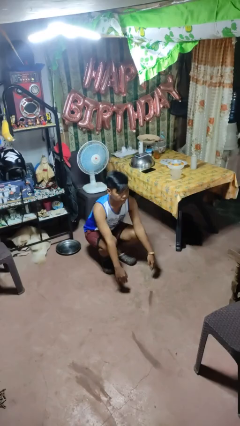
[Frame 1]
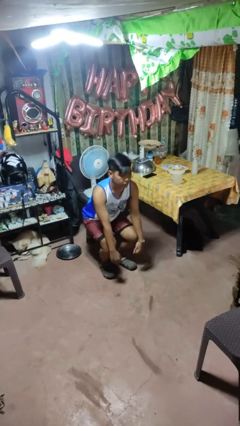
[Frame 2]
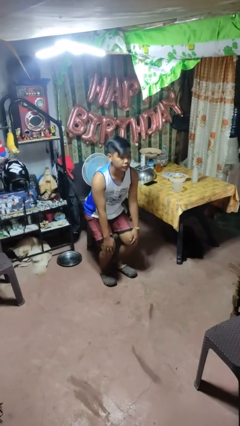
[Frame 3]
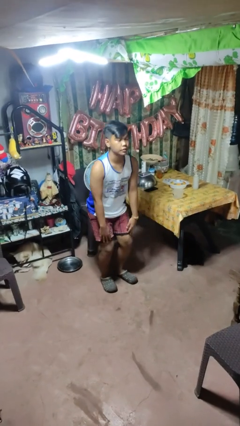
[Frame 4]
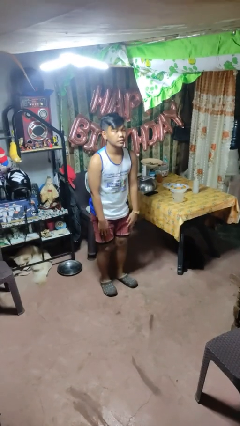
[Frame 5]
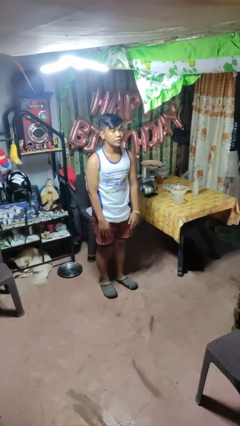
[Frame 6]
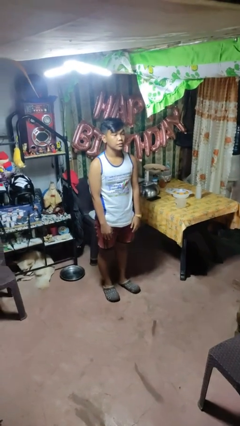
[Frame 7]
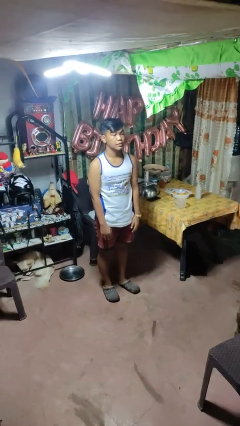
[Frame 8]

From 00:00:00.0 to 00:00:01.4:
person stands up

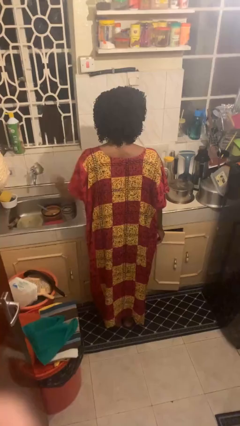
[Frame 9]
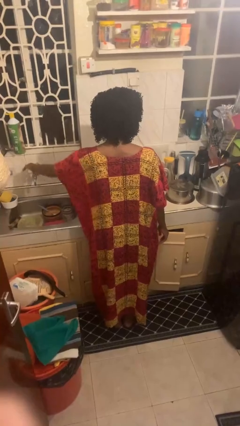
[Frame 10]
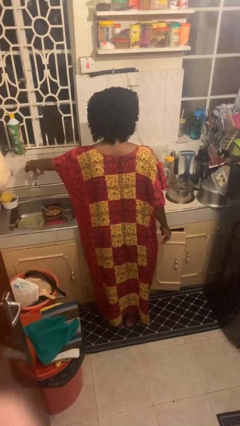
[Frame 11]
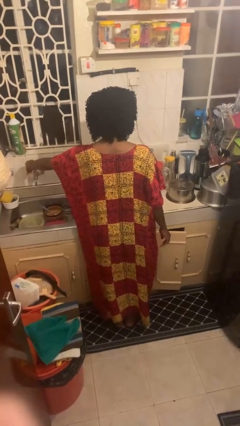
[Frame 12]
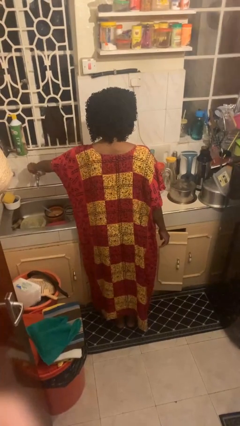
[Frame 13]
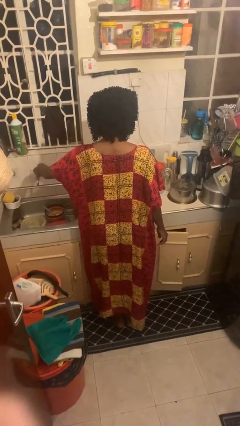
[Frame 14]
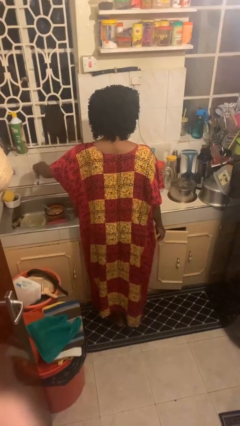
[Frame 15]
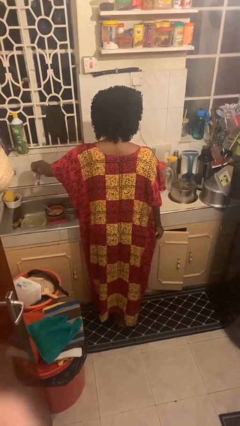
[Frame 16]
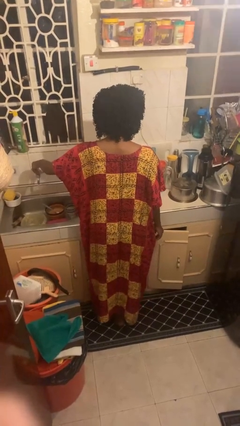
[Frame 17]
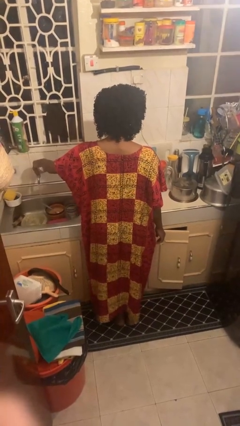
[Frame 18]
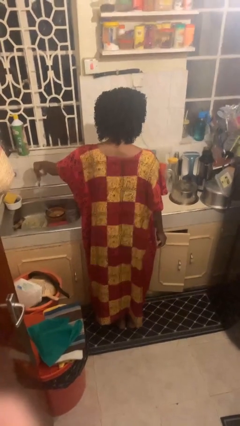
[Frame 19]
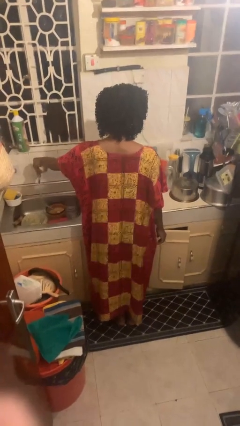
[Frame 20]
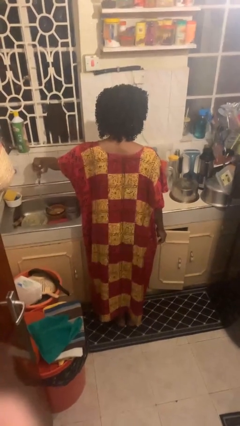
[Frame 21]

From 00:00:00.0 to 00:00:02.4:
person turns on faucet

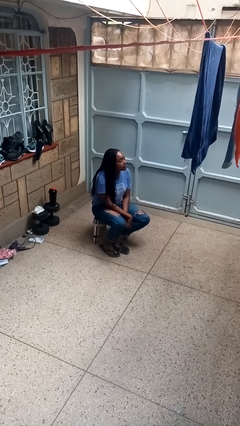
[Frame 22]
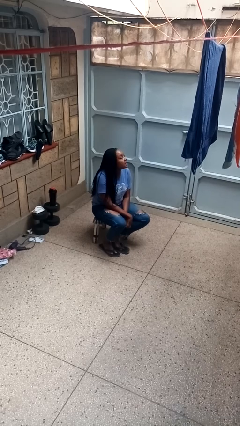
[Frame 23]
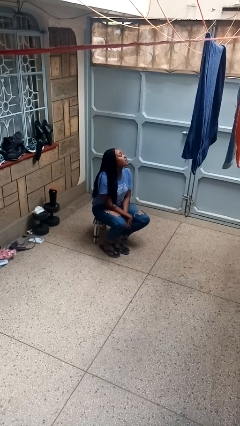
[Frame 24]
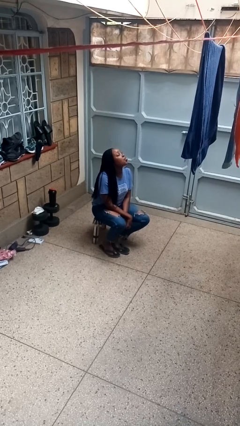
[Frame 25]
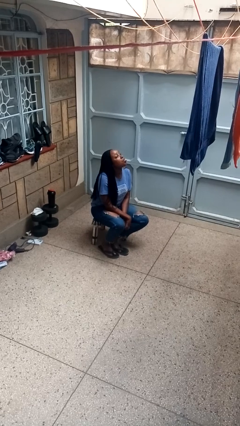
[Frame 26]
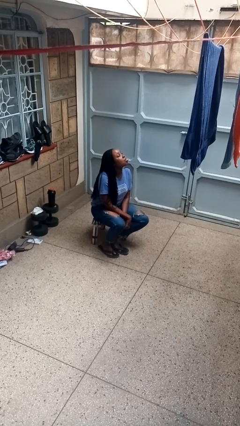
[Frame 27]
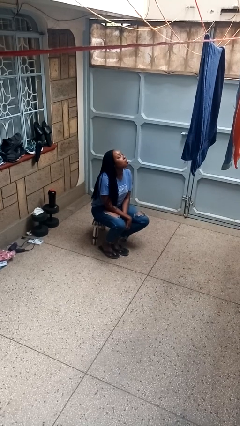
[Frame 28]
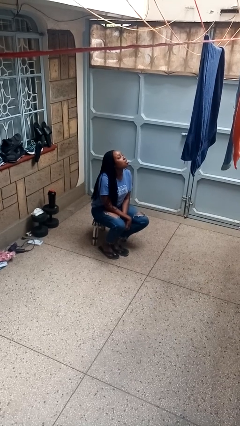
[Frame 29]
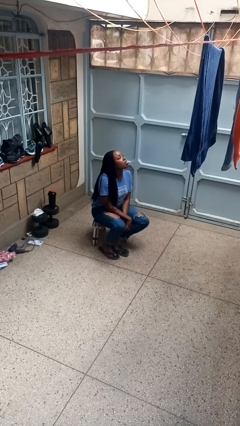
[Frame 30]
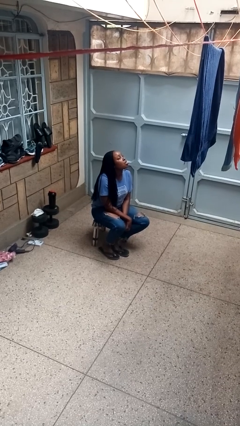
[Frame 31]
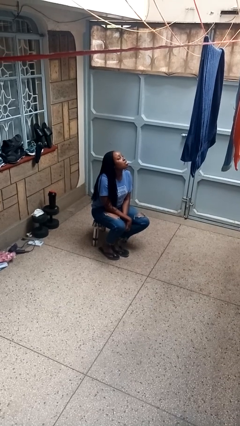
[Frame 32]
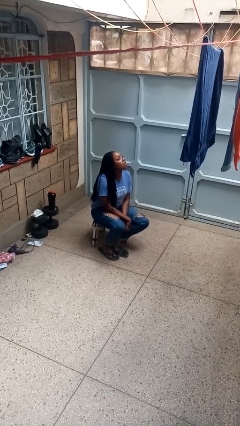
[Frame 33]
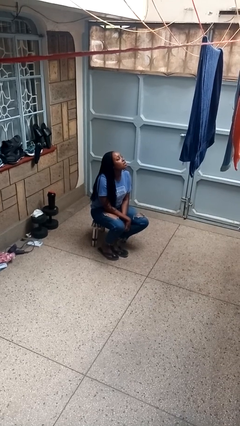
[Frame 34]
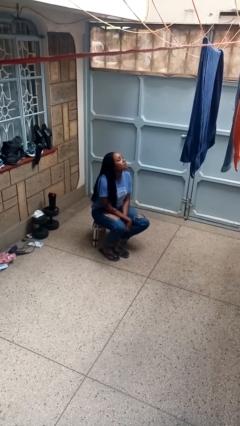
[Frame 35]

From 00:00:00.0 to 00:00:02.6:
person sticks out tongue

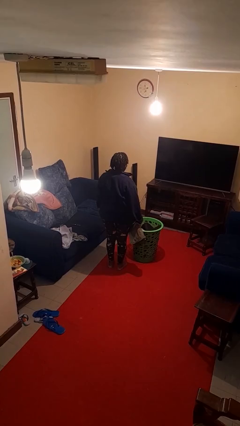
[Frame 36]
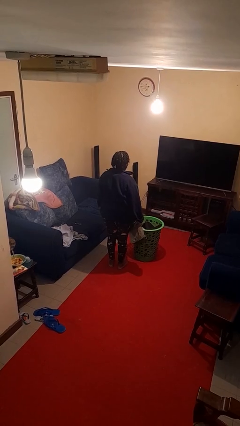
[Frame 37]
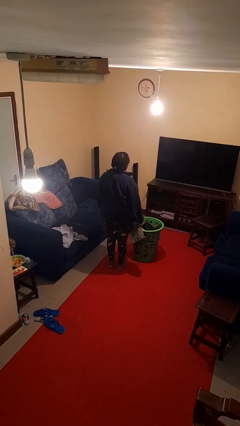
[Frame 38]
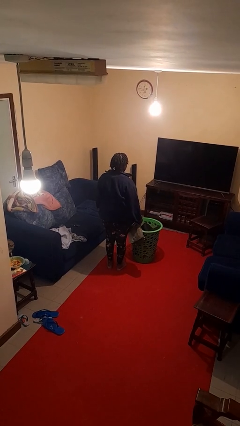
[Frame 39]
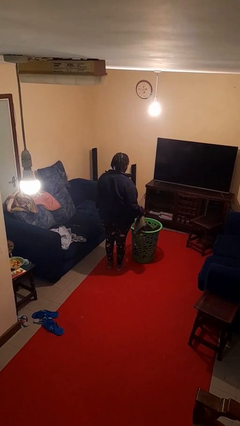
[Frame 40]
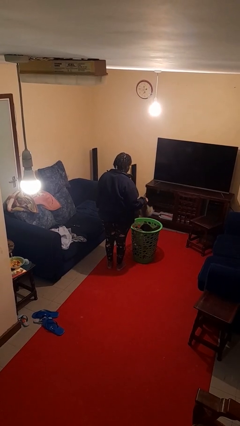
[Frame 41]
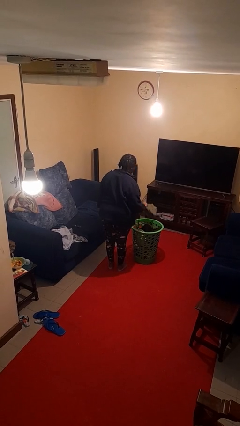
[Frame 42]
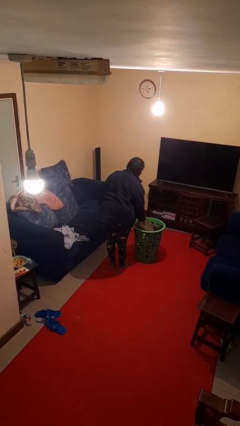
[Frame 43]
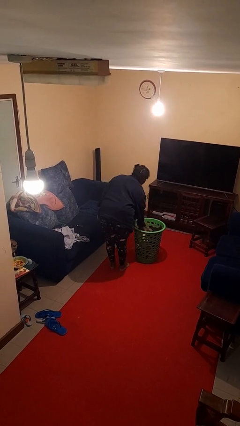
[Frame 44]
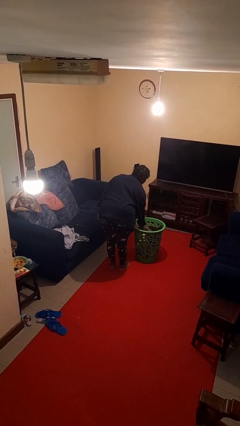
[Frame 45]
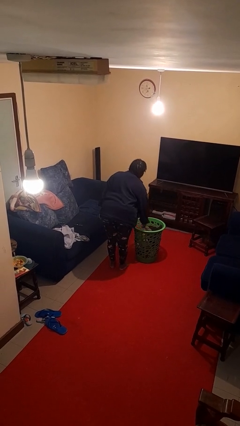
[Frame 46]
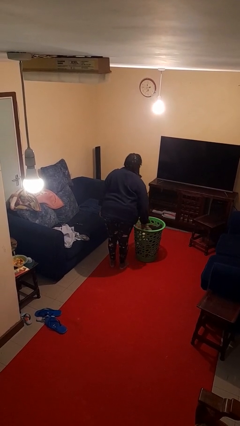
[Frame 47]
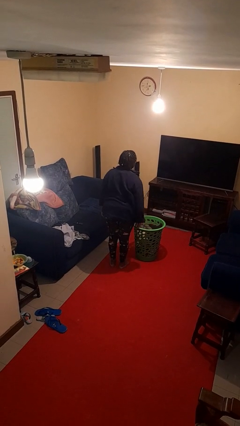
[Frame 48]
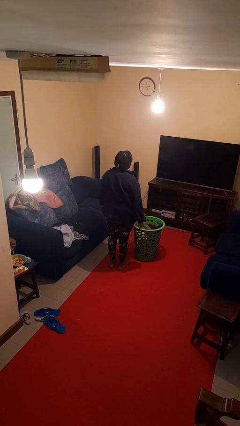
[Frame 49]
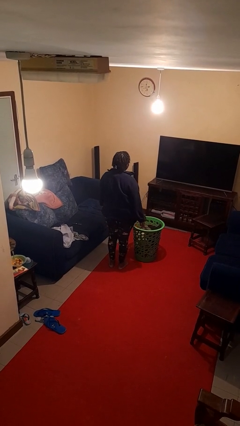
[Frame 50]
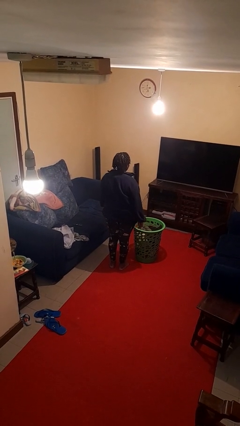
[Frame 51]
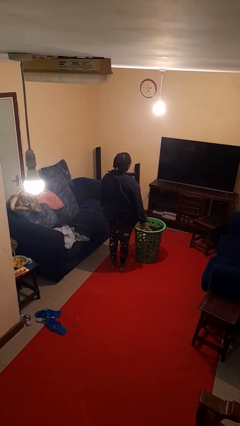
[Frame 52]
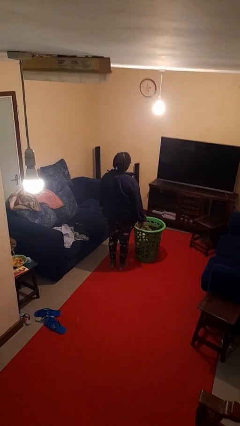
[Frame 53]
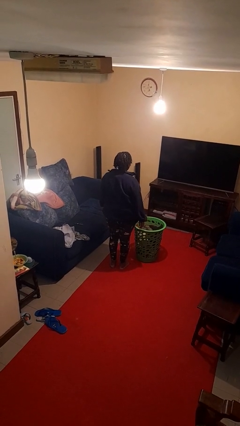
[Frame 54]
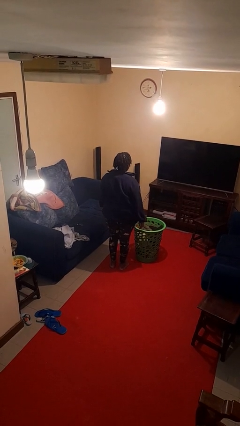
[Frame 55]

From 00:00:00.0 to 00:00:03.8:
person puts object into basket

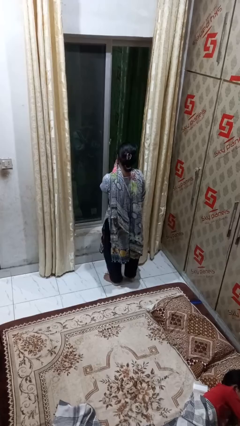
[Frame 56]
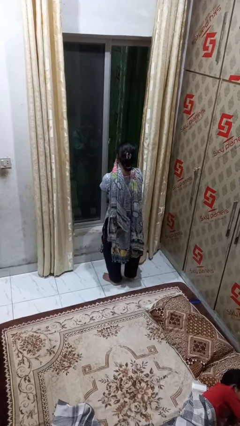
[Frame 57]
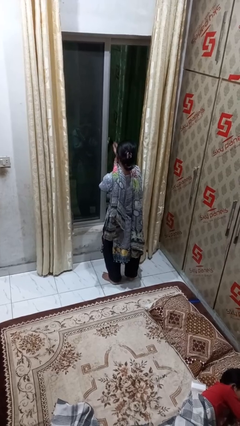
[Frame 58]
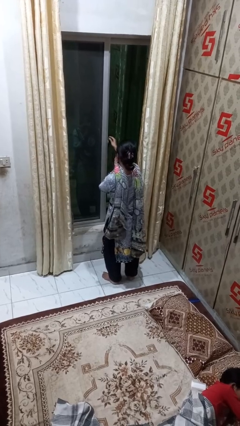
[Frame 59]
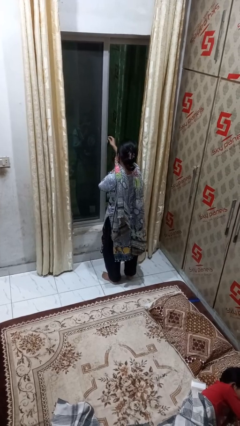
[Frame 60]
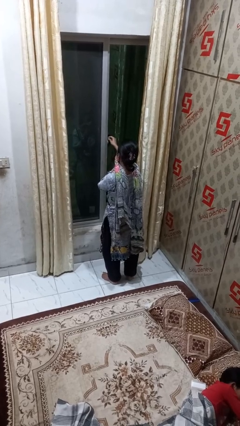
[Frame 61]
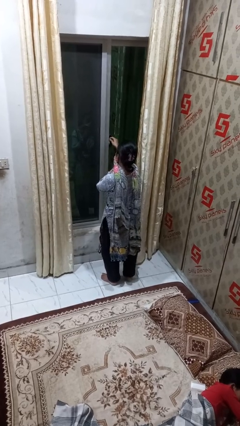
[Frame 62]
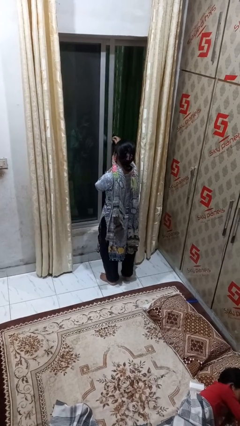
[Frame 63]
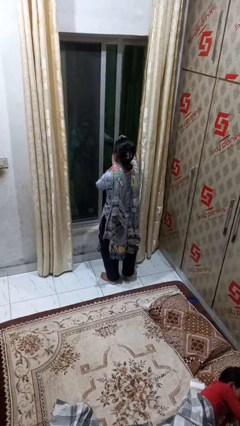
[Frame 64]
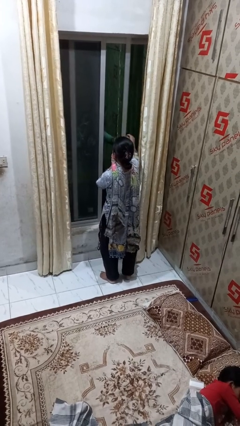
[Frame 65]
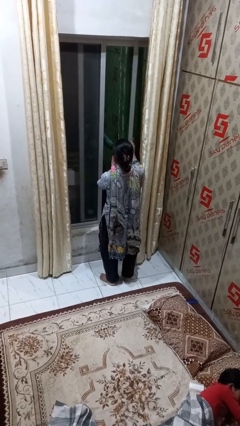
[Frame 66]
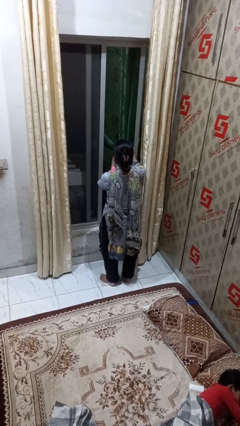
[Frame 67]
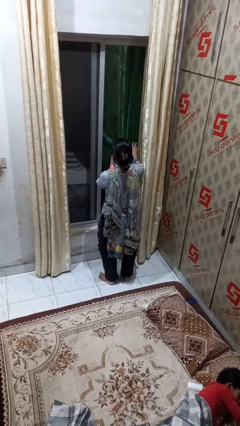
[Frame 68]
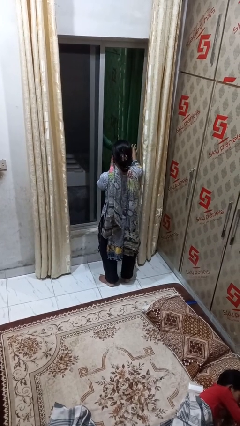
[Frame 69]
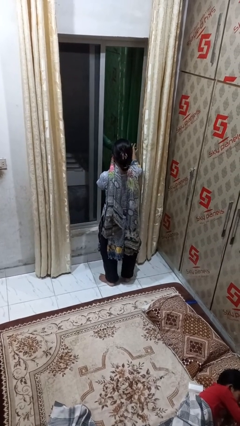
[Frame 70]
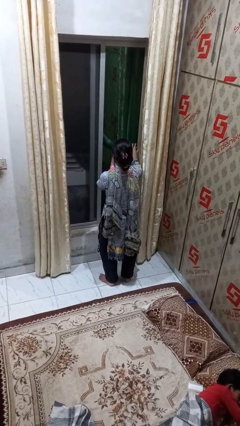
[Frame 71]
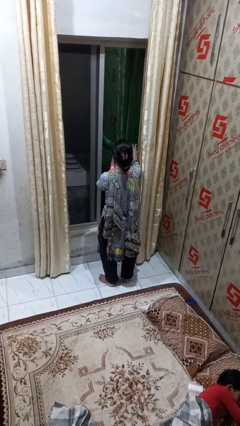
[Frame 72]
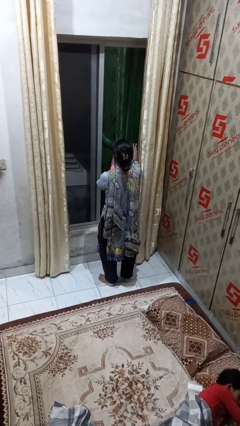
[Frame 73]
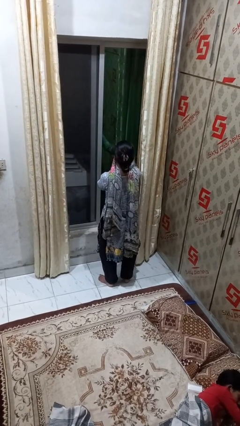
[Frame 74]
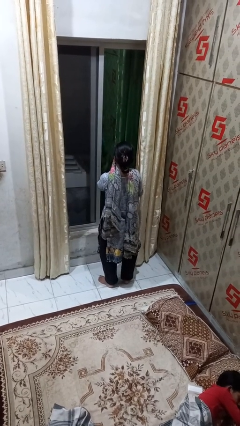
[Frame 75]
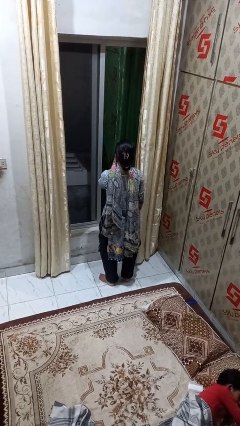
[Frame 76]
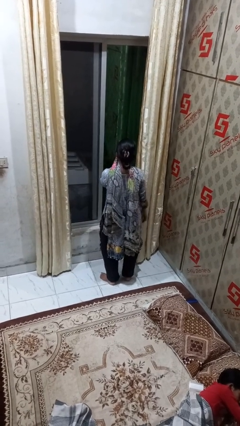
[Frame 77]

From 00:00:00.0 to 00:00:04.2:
person opens home window

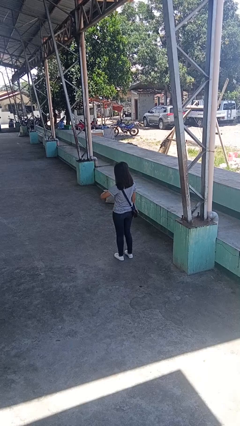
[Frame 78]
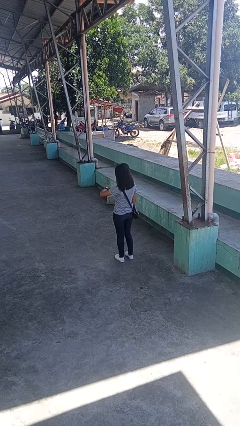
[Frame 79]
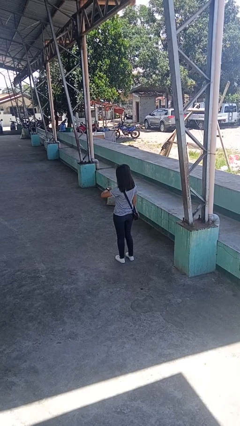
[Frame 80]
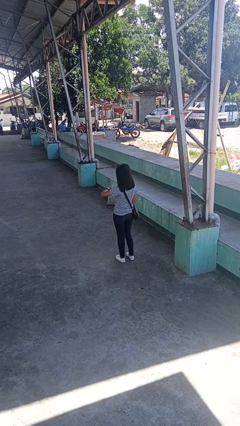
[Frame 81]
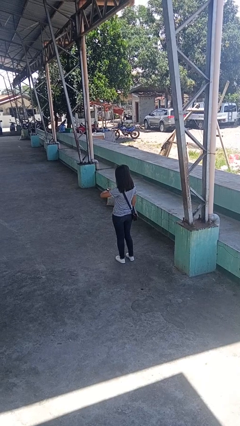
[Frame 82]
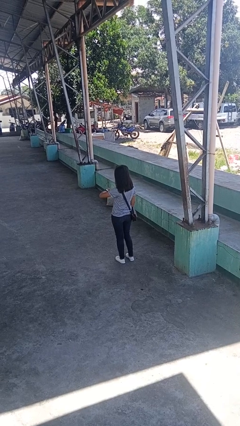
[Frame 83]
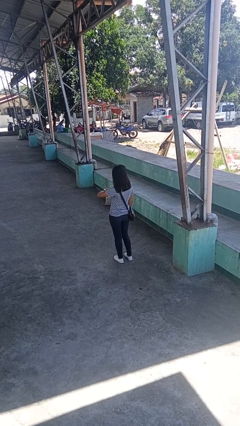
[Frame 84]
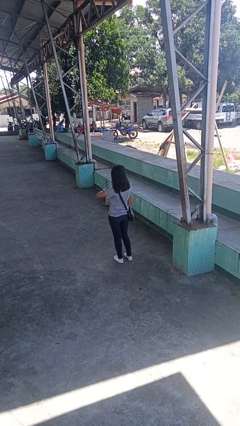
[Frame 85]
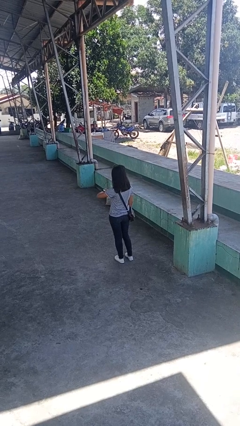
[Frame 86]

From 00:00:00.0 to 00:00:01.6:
person looks at wristwatch

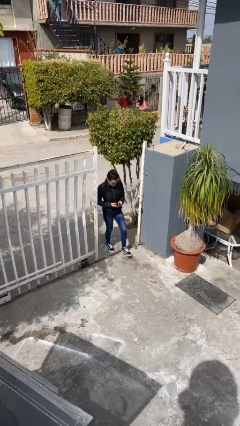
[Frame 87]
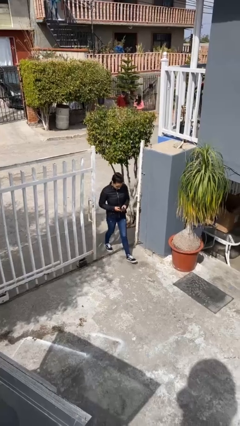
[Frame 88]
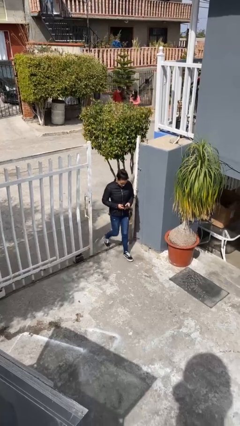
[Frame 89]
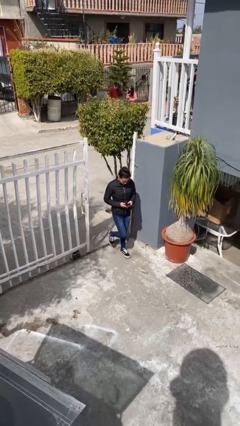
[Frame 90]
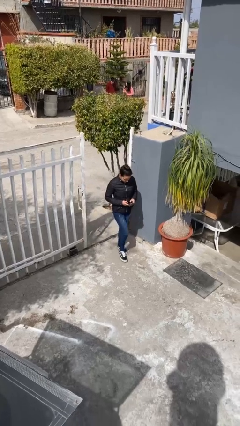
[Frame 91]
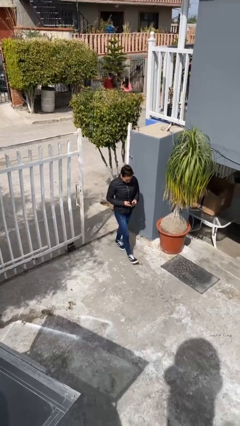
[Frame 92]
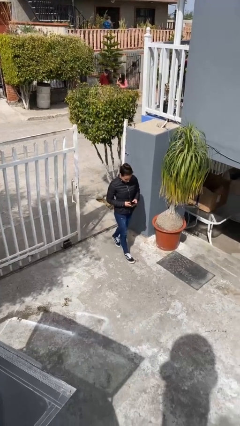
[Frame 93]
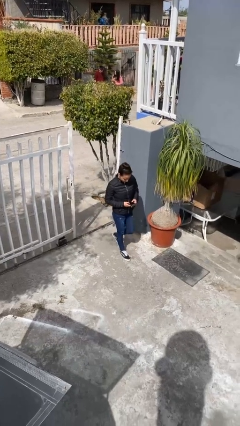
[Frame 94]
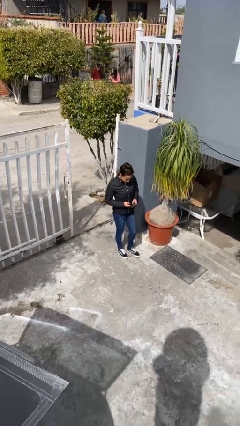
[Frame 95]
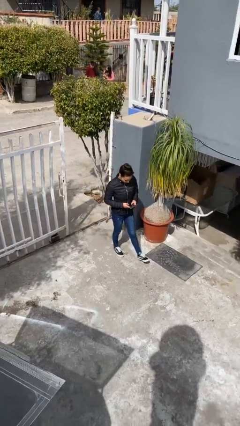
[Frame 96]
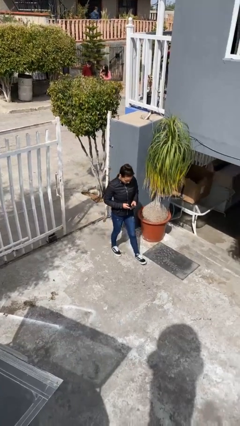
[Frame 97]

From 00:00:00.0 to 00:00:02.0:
person enters scene through structure
